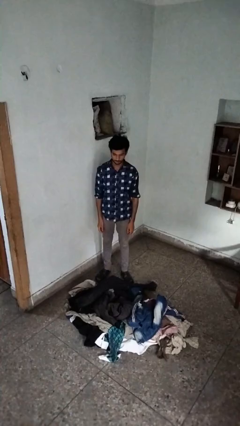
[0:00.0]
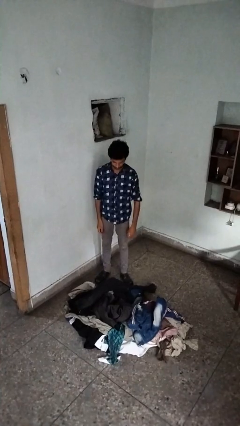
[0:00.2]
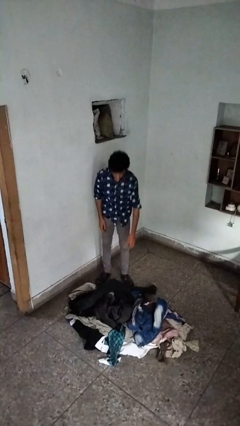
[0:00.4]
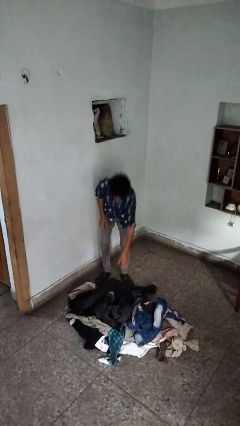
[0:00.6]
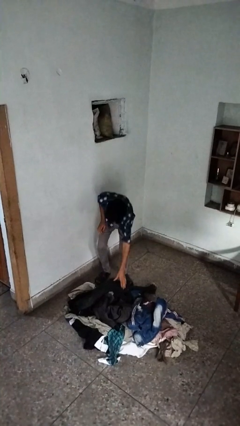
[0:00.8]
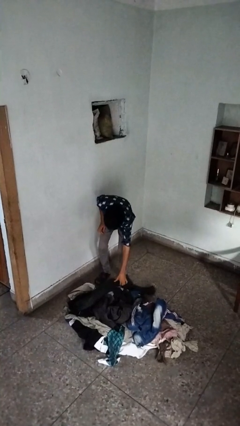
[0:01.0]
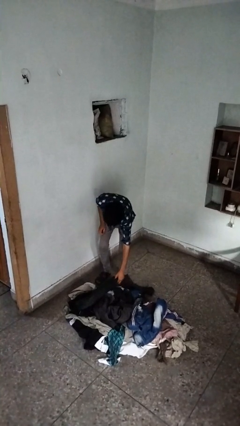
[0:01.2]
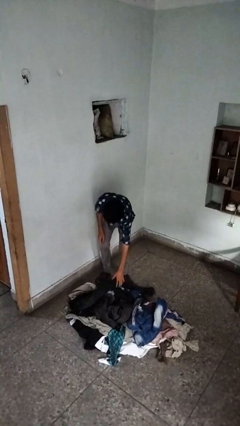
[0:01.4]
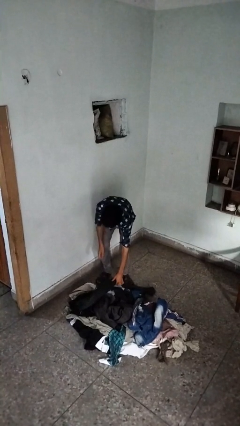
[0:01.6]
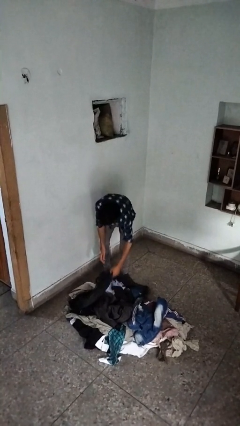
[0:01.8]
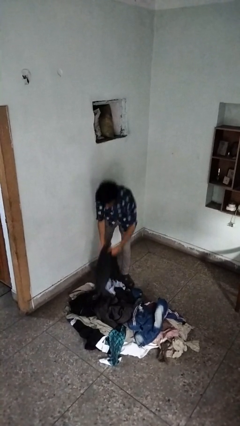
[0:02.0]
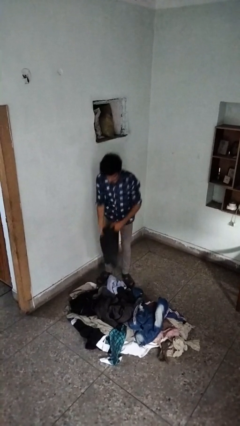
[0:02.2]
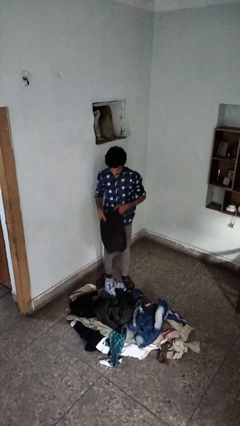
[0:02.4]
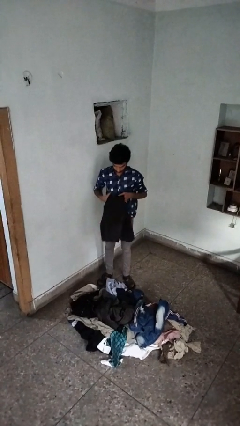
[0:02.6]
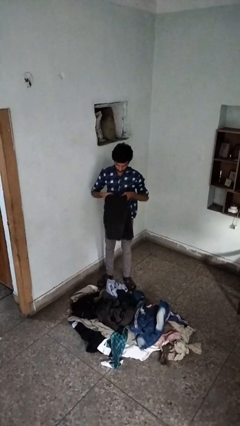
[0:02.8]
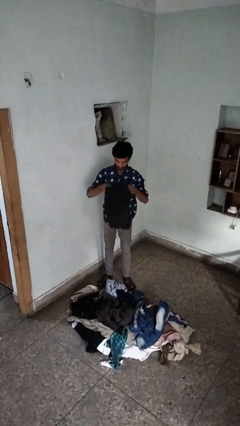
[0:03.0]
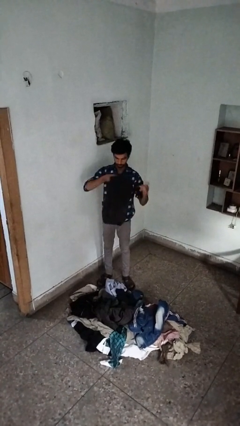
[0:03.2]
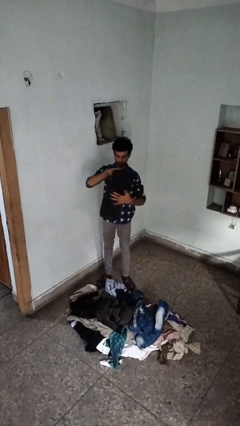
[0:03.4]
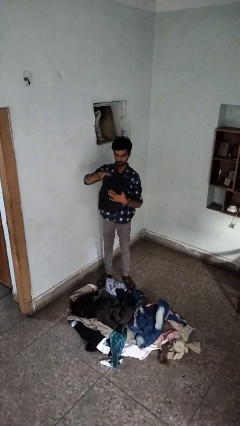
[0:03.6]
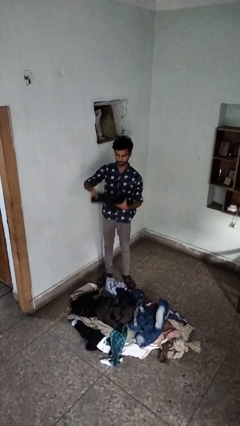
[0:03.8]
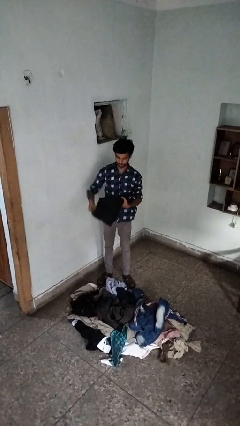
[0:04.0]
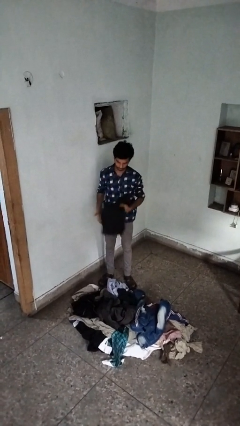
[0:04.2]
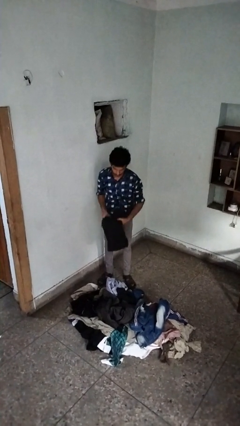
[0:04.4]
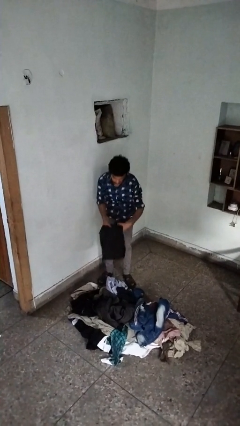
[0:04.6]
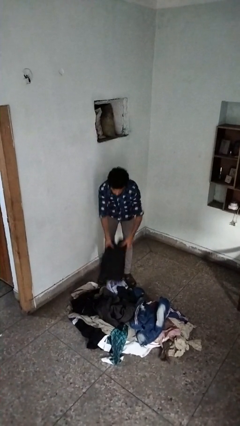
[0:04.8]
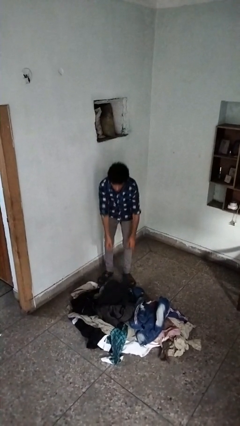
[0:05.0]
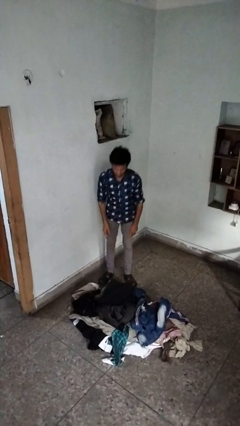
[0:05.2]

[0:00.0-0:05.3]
person folds pants

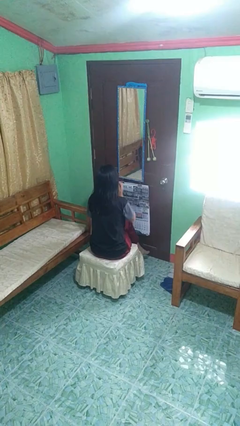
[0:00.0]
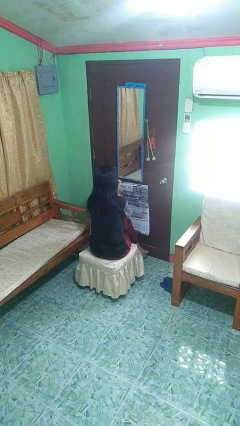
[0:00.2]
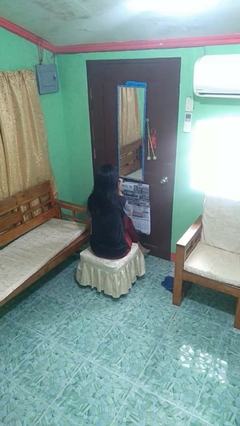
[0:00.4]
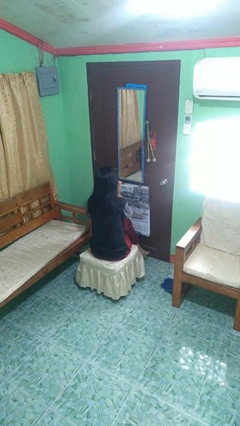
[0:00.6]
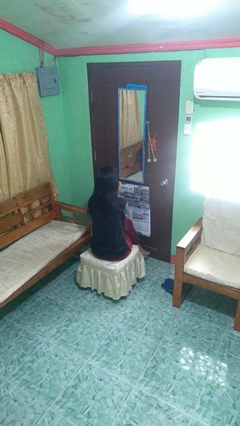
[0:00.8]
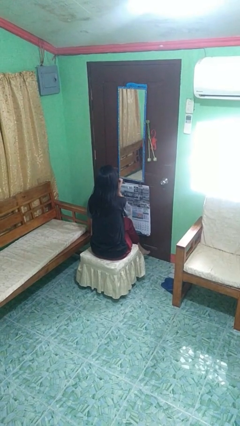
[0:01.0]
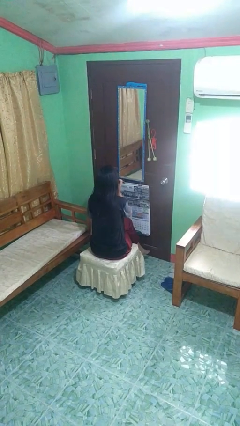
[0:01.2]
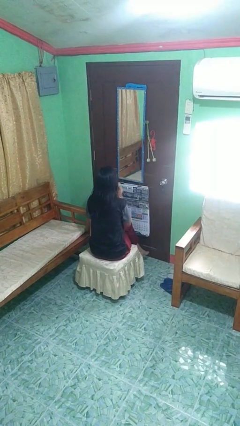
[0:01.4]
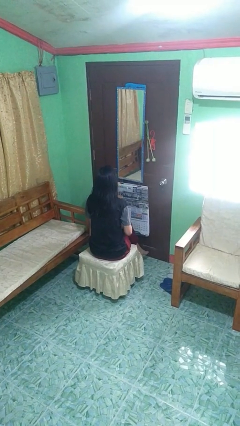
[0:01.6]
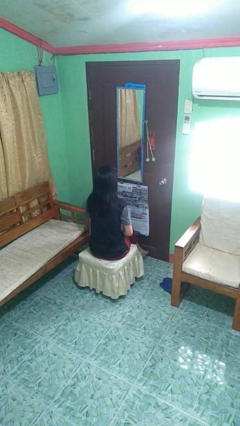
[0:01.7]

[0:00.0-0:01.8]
person scratches face

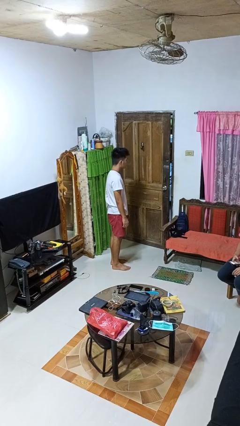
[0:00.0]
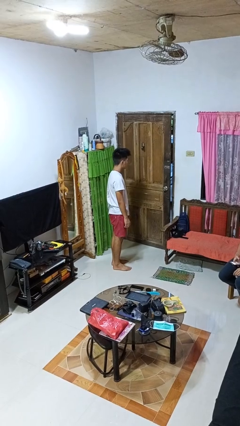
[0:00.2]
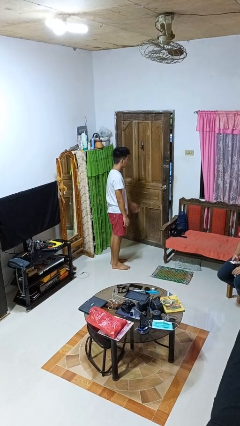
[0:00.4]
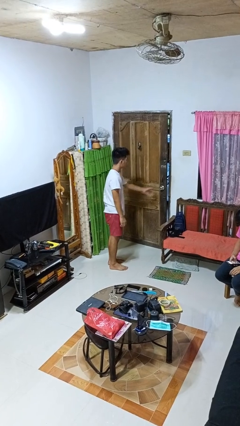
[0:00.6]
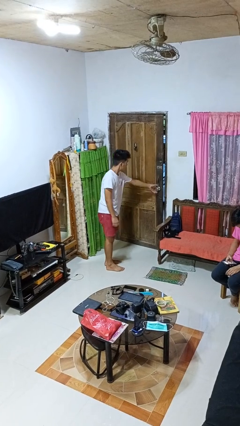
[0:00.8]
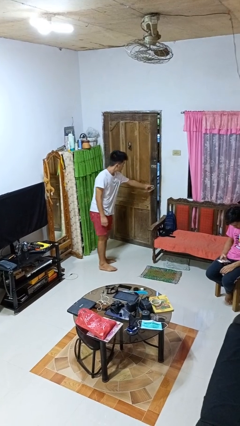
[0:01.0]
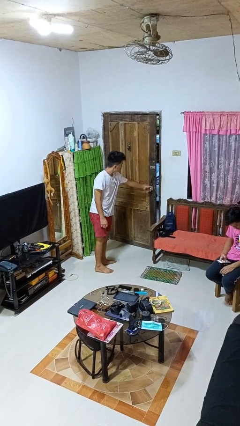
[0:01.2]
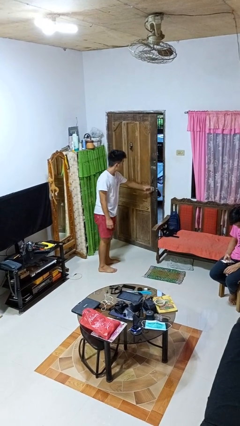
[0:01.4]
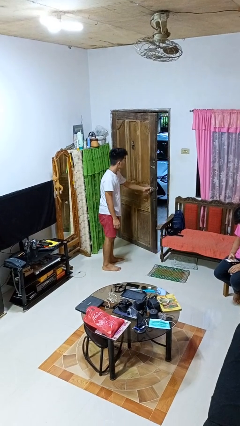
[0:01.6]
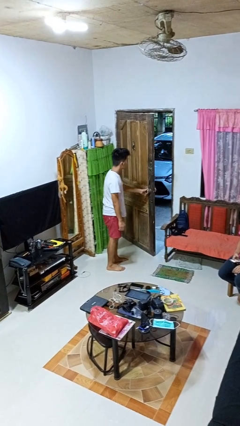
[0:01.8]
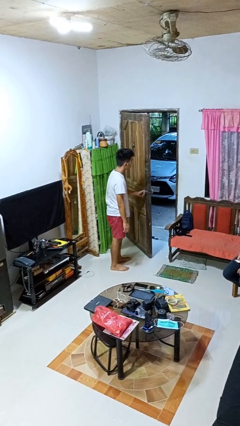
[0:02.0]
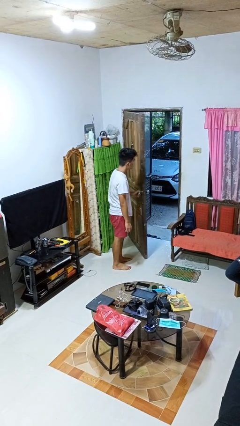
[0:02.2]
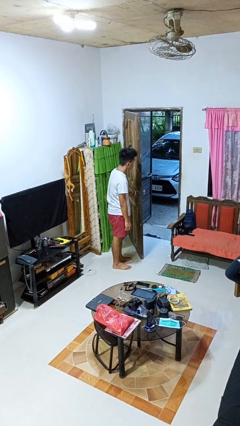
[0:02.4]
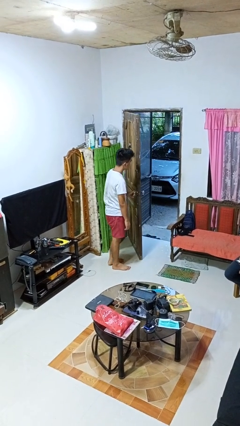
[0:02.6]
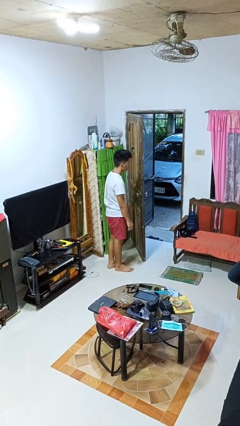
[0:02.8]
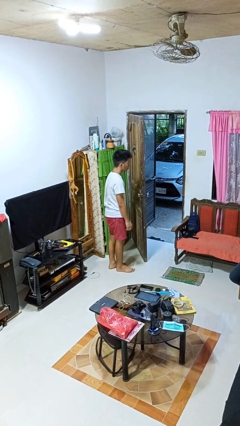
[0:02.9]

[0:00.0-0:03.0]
person opens facility door

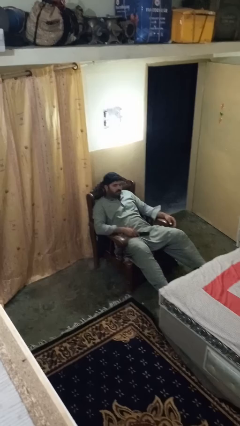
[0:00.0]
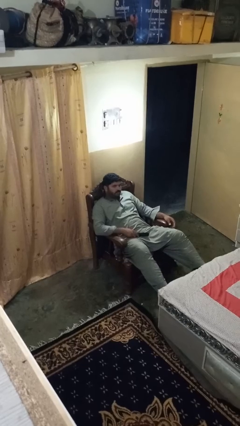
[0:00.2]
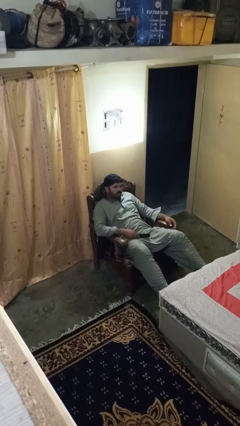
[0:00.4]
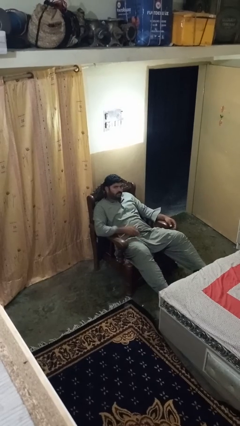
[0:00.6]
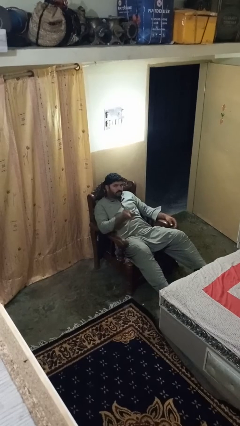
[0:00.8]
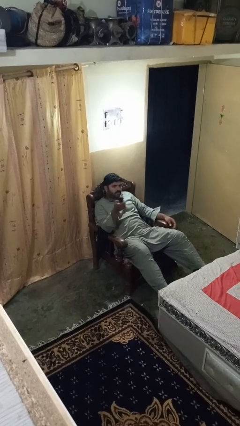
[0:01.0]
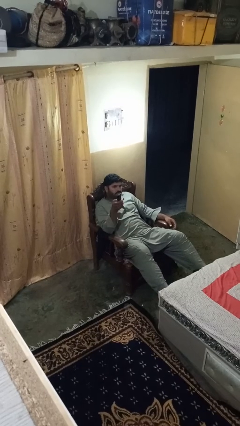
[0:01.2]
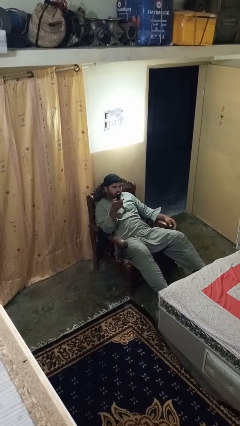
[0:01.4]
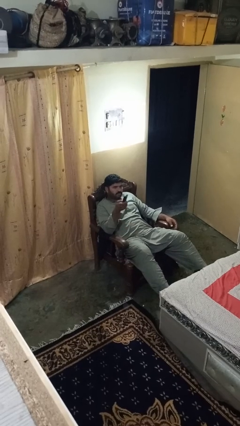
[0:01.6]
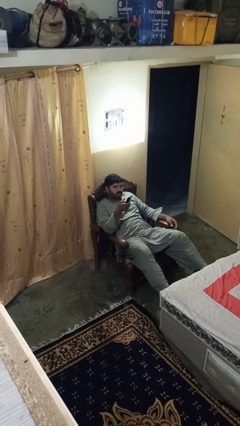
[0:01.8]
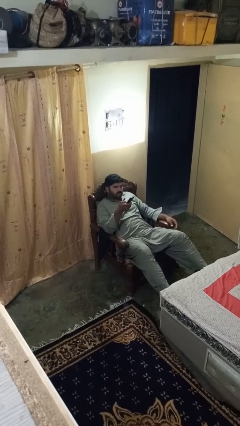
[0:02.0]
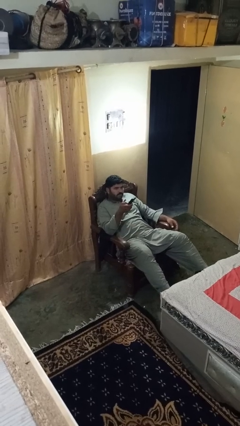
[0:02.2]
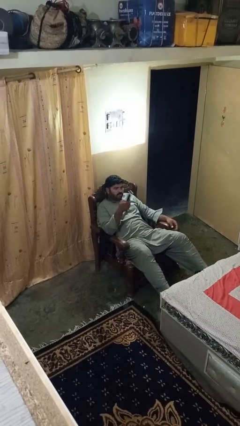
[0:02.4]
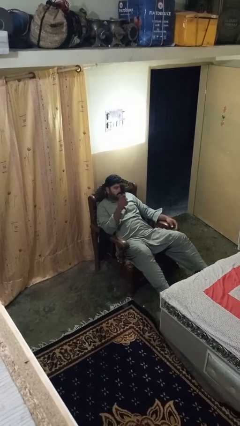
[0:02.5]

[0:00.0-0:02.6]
person uses television remote

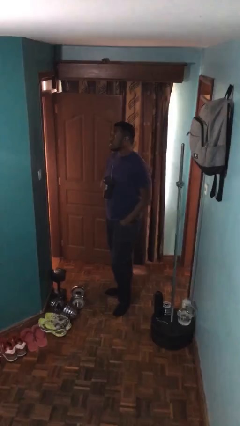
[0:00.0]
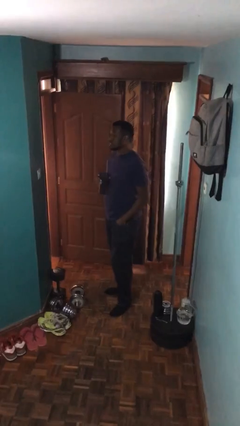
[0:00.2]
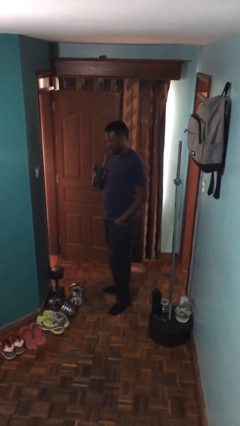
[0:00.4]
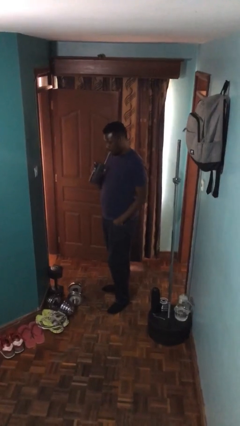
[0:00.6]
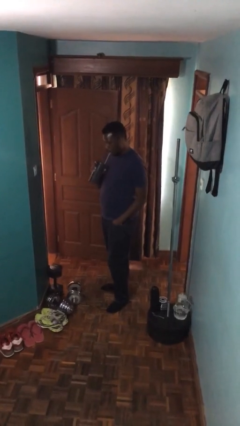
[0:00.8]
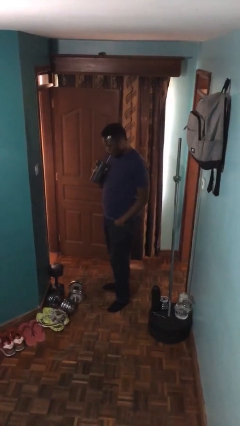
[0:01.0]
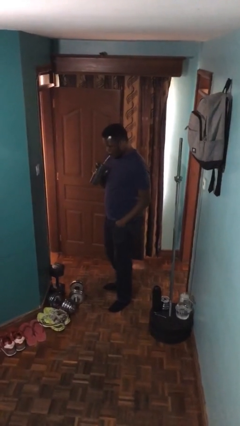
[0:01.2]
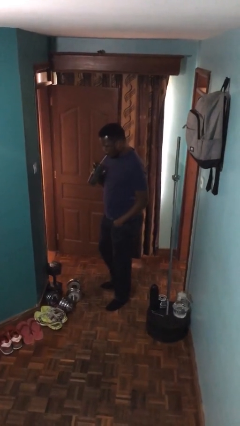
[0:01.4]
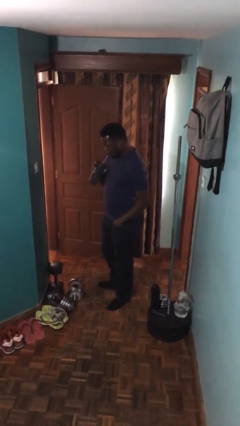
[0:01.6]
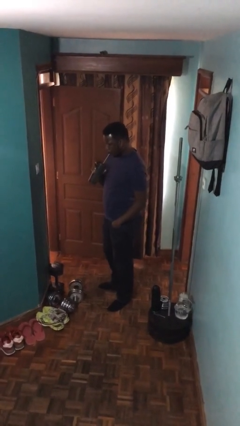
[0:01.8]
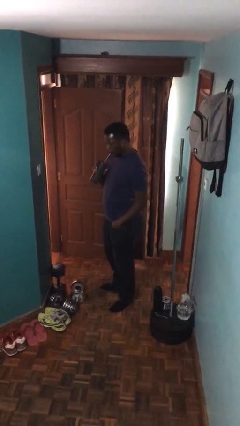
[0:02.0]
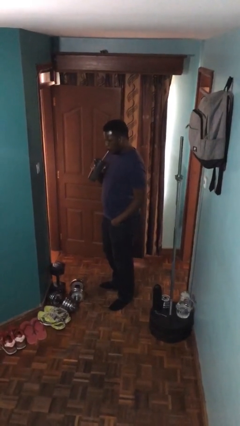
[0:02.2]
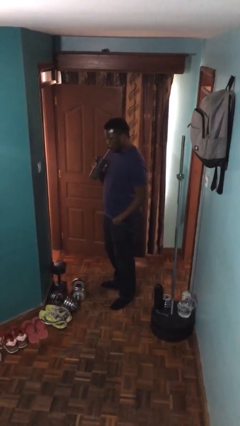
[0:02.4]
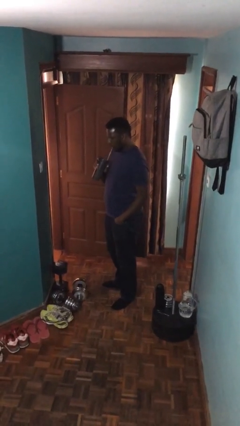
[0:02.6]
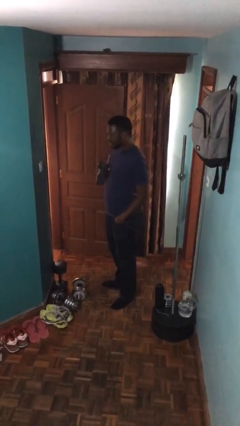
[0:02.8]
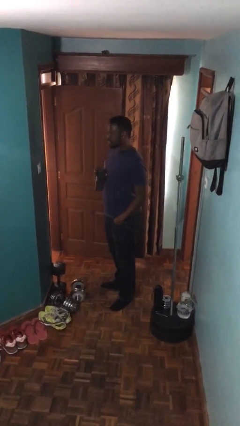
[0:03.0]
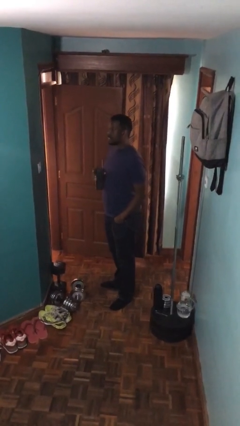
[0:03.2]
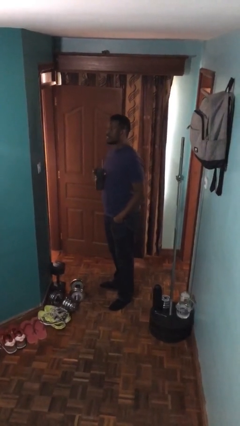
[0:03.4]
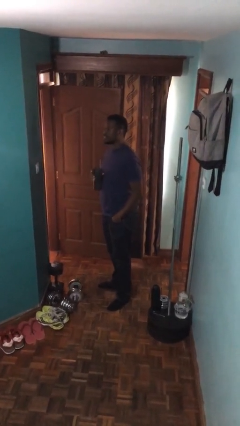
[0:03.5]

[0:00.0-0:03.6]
person drinks from straw

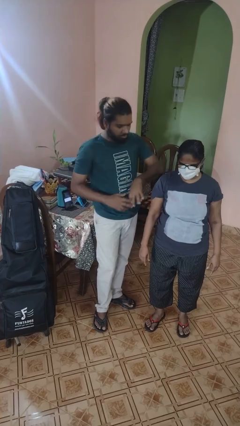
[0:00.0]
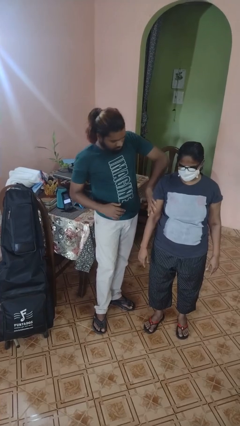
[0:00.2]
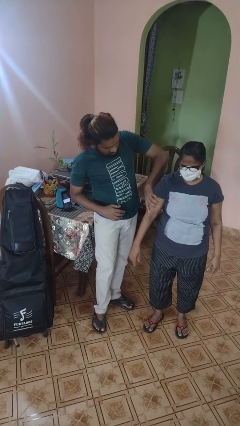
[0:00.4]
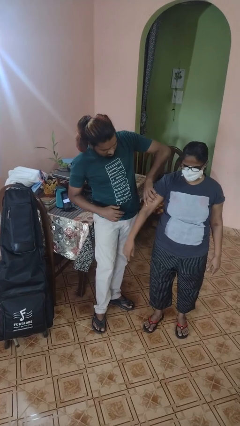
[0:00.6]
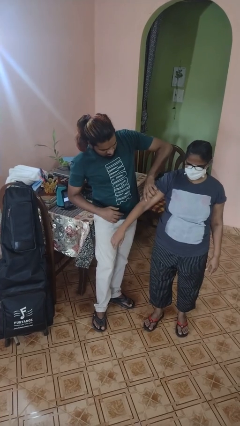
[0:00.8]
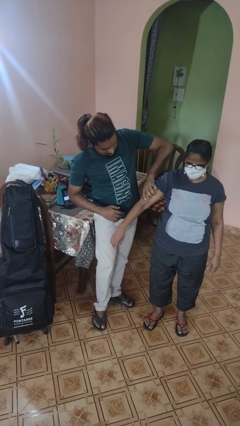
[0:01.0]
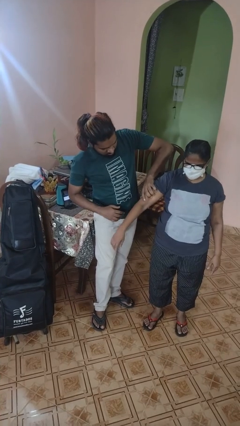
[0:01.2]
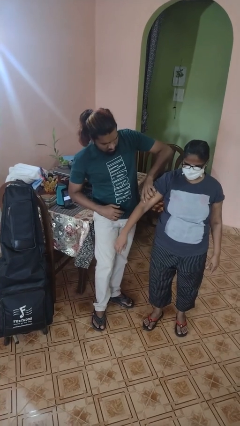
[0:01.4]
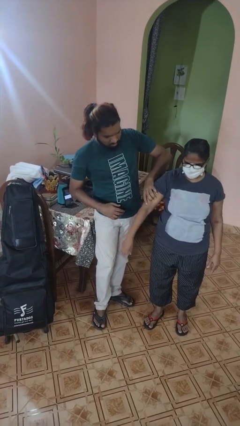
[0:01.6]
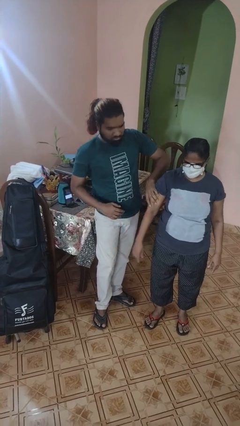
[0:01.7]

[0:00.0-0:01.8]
person grabs person by bicep
